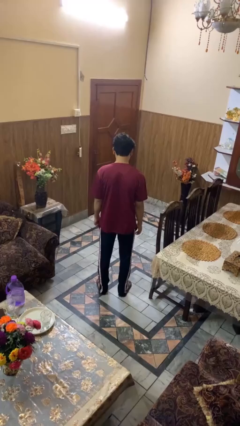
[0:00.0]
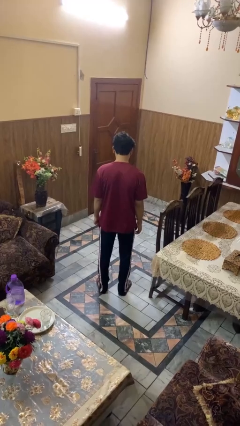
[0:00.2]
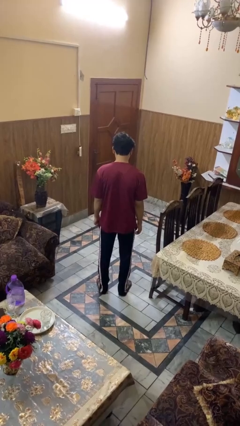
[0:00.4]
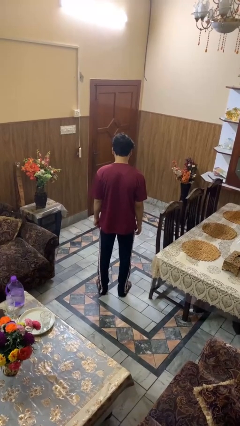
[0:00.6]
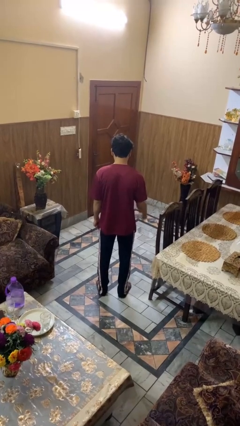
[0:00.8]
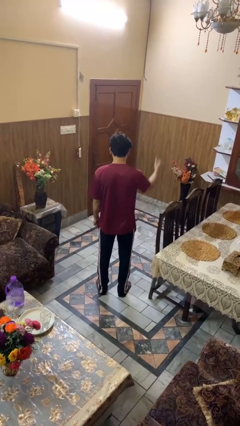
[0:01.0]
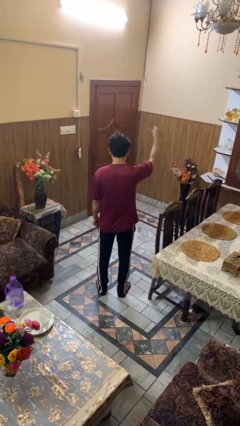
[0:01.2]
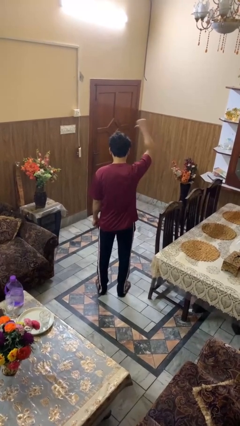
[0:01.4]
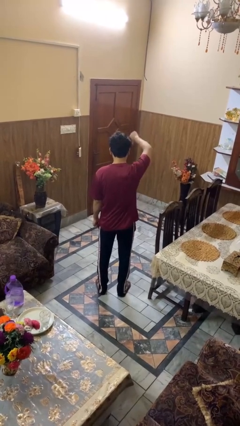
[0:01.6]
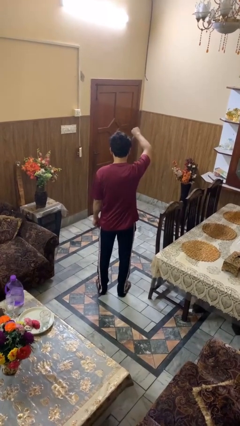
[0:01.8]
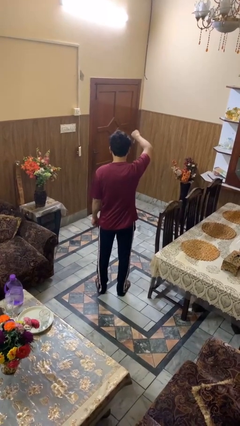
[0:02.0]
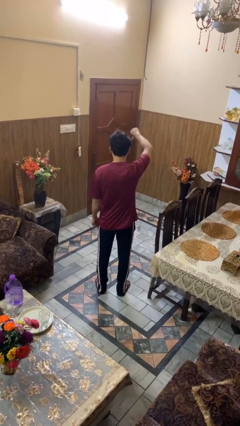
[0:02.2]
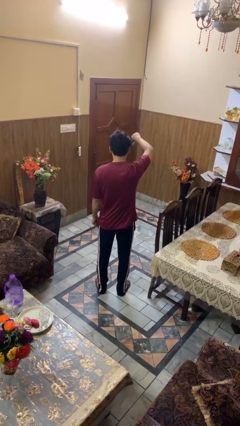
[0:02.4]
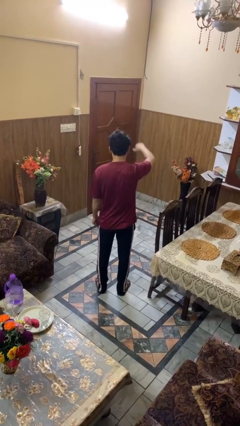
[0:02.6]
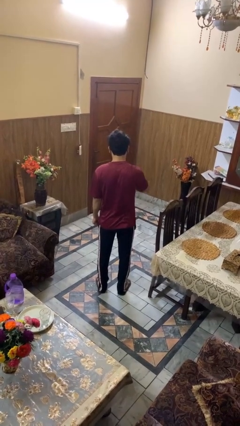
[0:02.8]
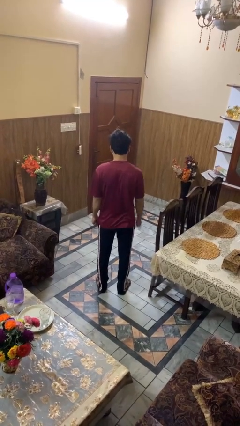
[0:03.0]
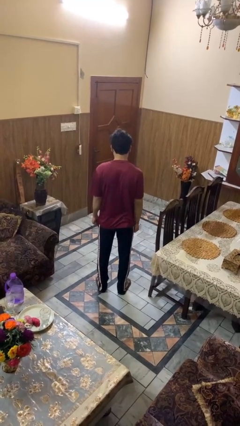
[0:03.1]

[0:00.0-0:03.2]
person gestures thumbs down

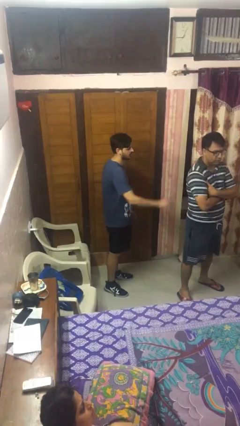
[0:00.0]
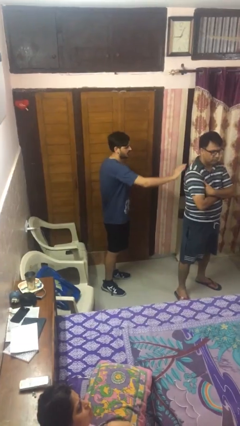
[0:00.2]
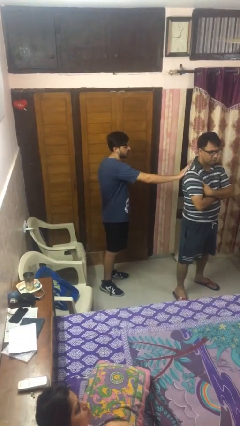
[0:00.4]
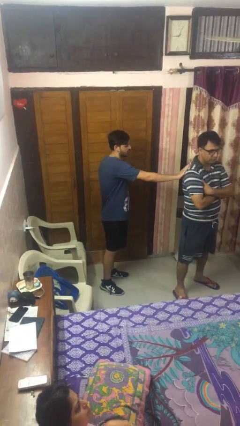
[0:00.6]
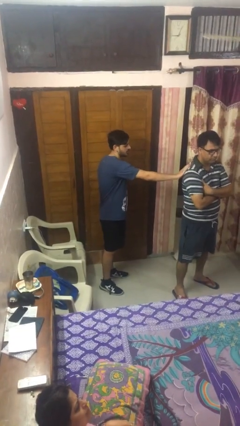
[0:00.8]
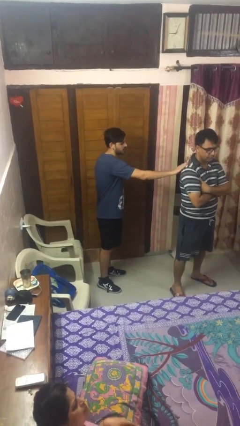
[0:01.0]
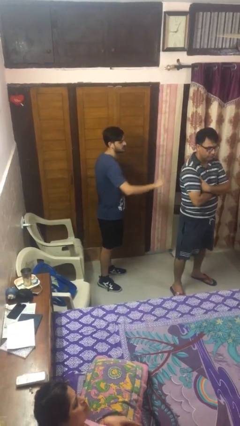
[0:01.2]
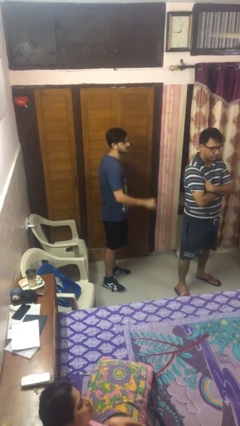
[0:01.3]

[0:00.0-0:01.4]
person touches back of person

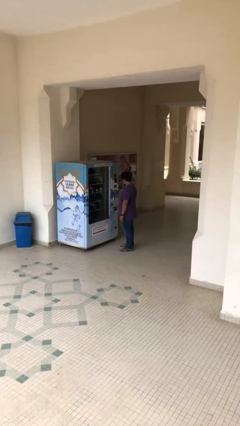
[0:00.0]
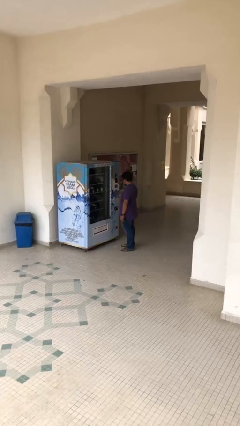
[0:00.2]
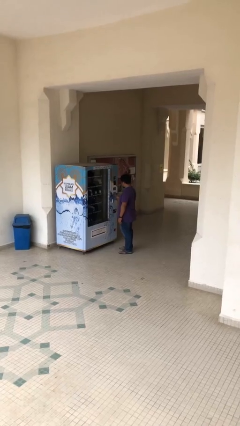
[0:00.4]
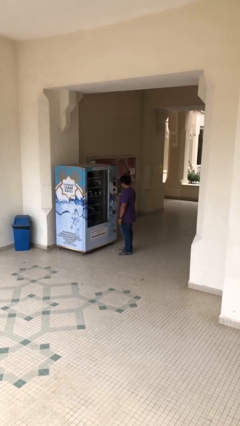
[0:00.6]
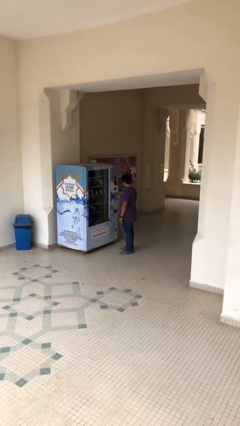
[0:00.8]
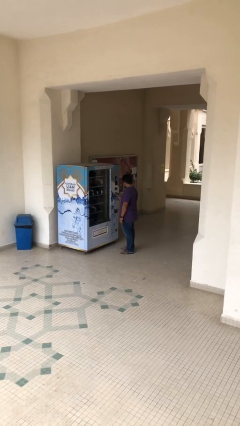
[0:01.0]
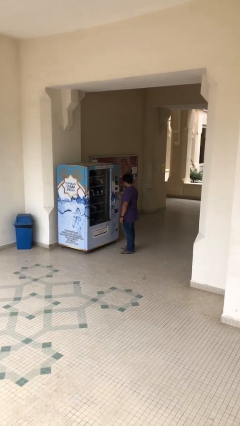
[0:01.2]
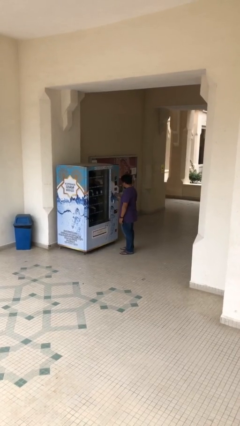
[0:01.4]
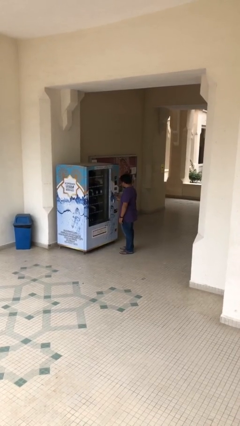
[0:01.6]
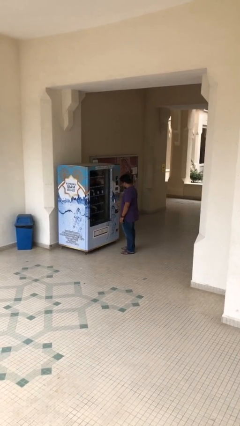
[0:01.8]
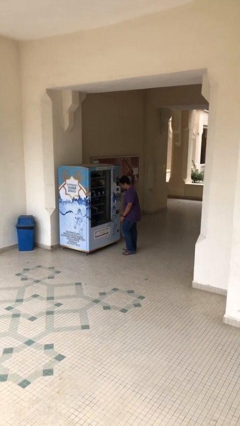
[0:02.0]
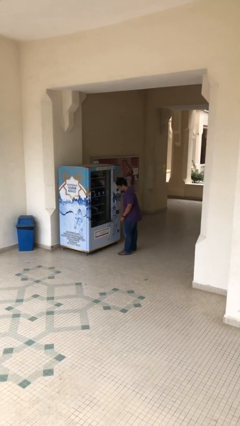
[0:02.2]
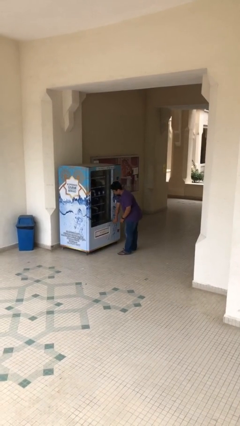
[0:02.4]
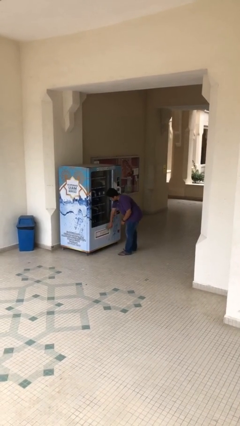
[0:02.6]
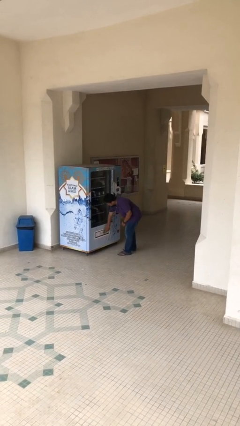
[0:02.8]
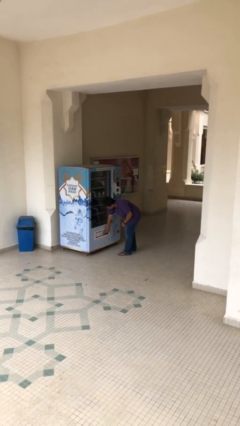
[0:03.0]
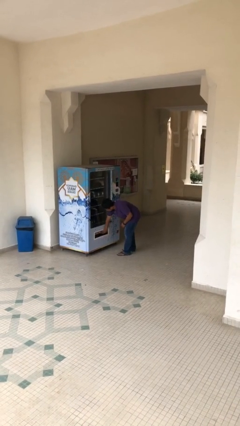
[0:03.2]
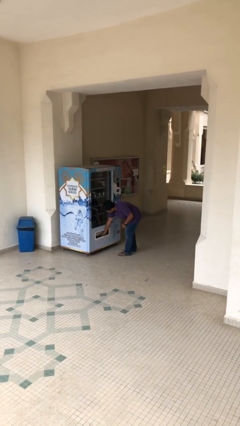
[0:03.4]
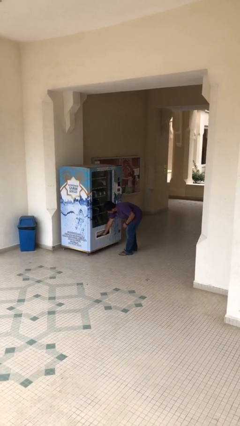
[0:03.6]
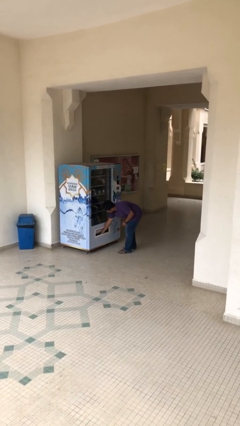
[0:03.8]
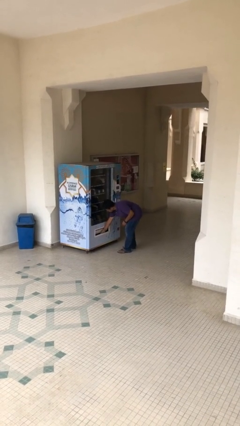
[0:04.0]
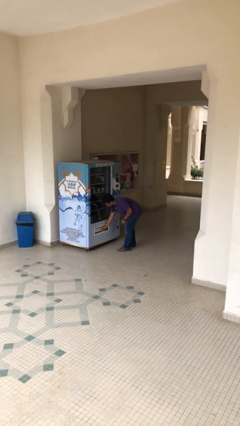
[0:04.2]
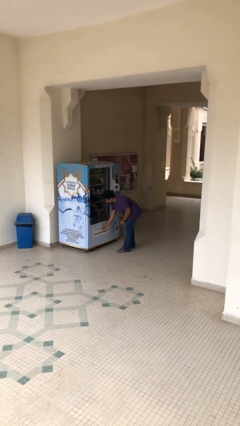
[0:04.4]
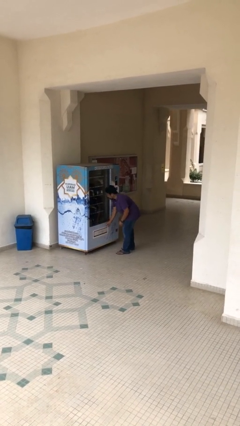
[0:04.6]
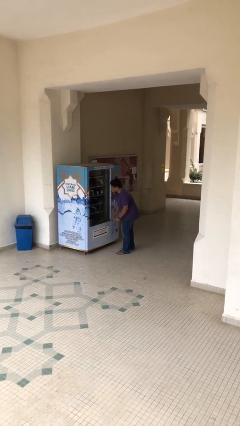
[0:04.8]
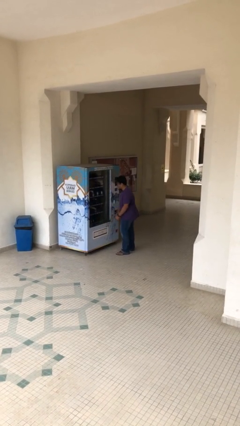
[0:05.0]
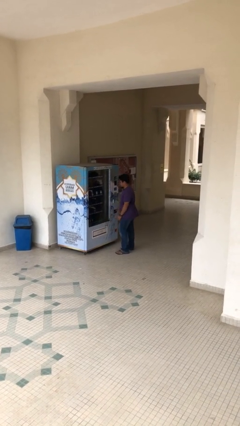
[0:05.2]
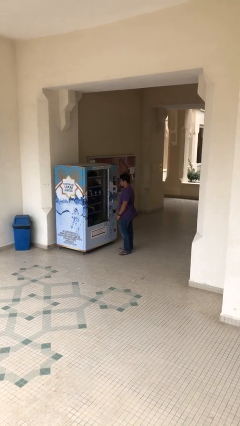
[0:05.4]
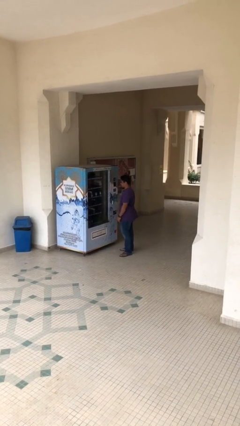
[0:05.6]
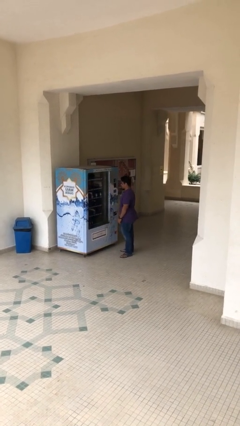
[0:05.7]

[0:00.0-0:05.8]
person purchases from machine

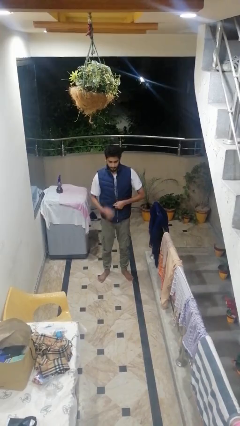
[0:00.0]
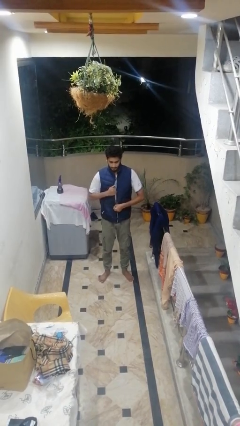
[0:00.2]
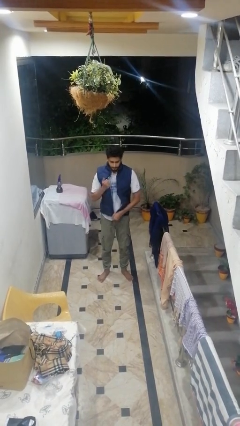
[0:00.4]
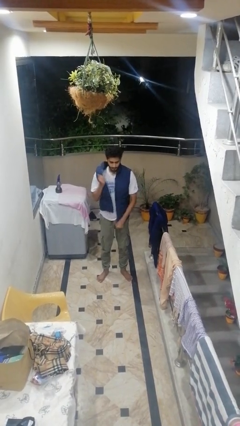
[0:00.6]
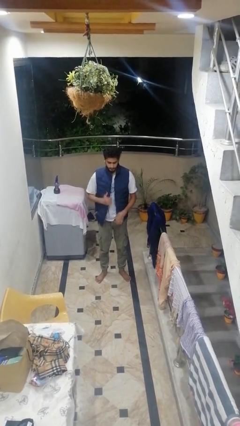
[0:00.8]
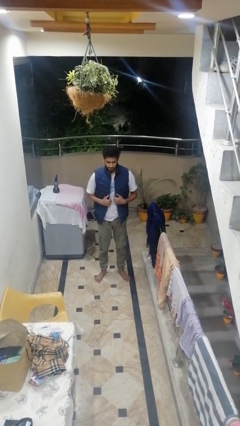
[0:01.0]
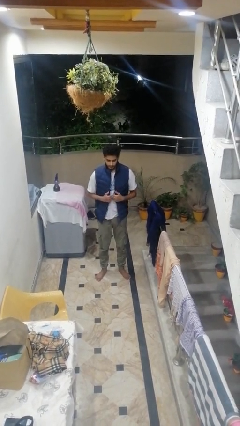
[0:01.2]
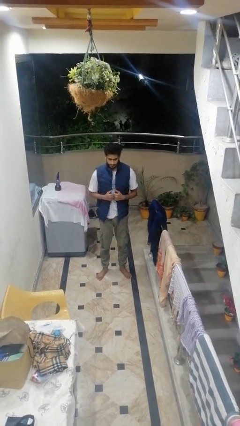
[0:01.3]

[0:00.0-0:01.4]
person unzips jacket

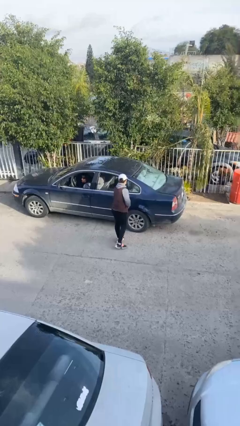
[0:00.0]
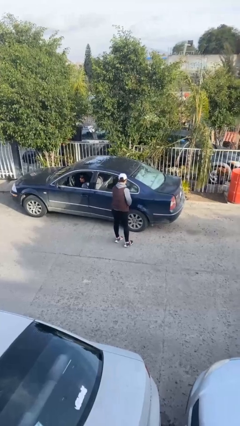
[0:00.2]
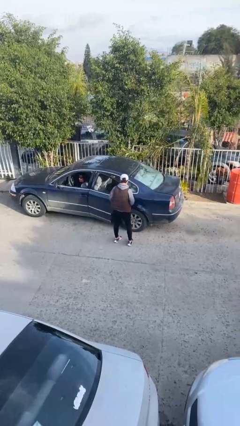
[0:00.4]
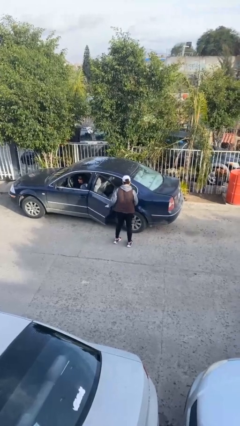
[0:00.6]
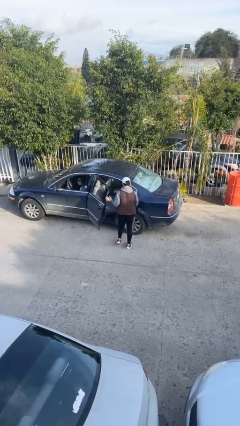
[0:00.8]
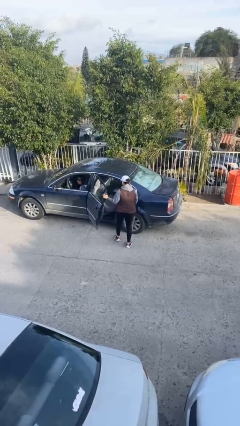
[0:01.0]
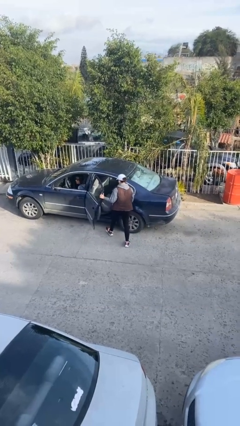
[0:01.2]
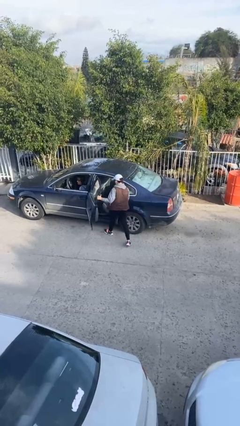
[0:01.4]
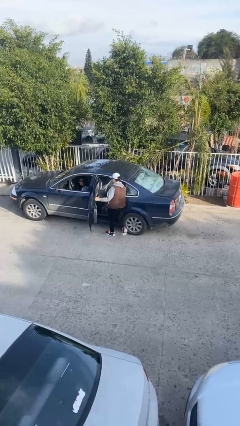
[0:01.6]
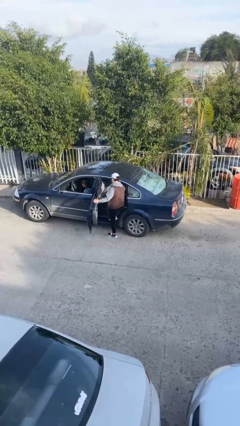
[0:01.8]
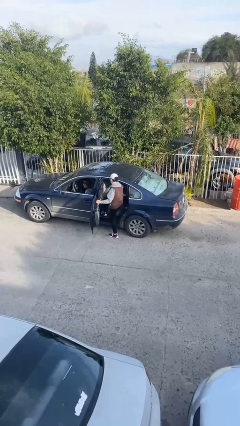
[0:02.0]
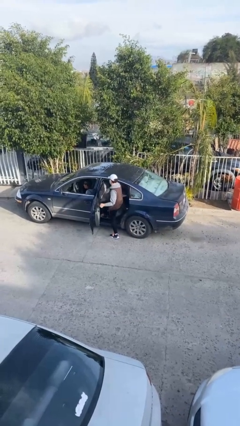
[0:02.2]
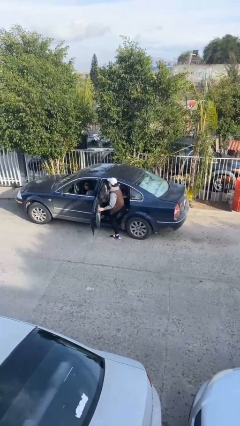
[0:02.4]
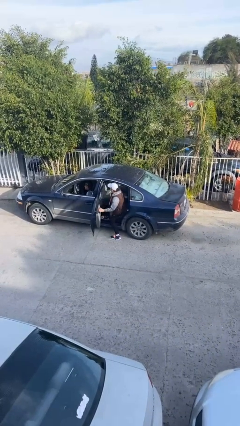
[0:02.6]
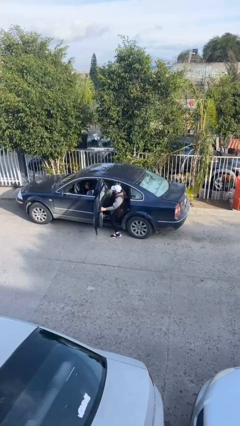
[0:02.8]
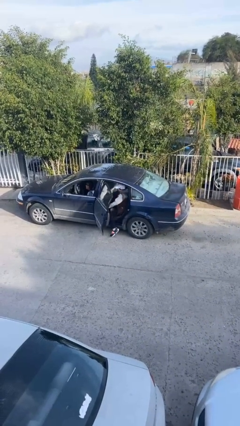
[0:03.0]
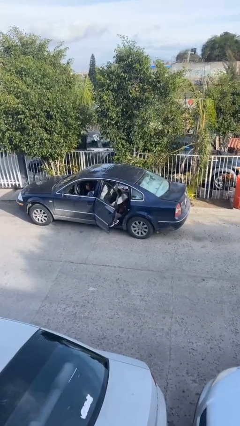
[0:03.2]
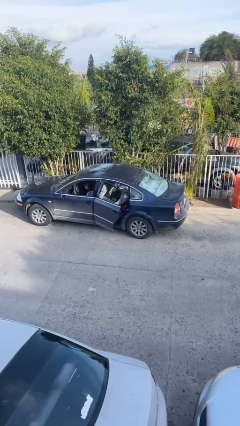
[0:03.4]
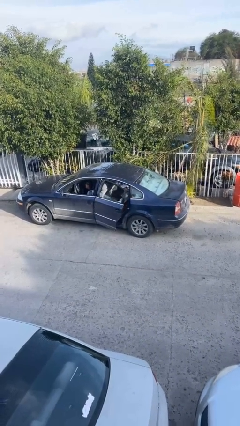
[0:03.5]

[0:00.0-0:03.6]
car picks up person

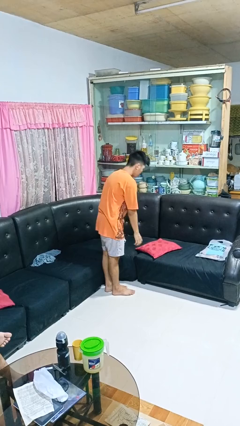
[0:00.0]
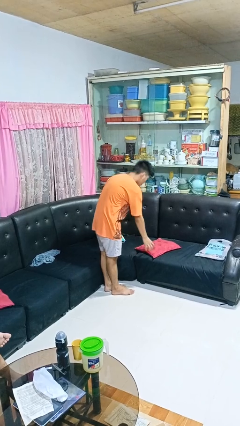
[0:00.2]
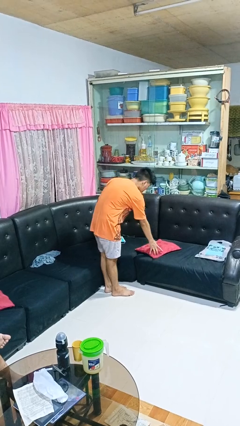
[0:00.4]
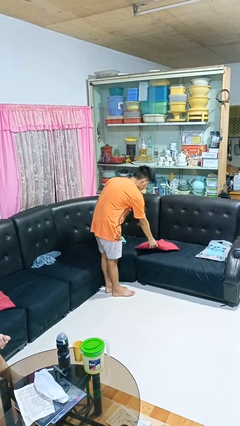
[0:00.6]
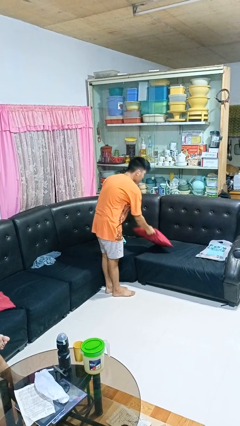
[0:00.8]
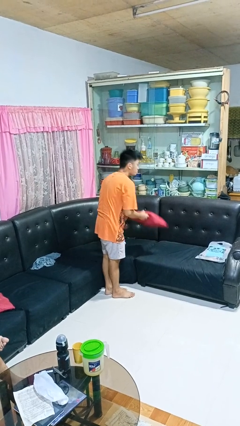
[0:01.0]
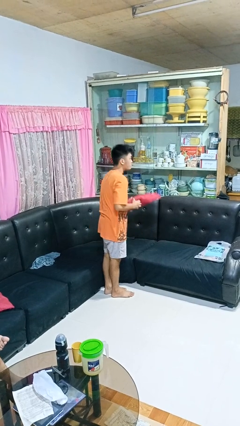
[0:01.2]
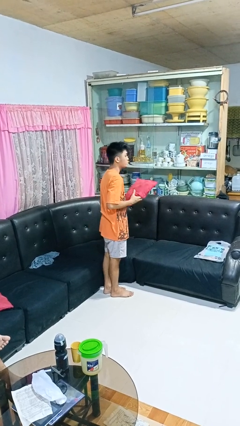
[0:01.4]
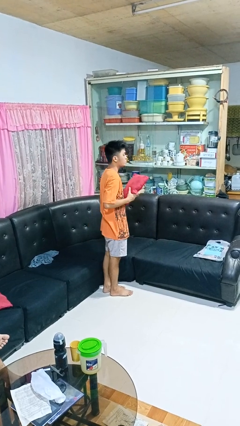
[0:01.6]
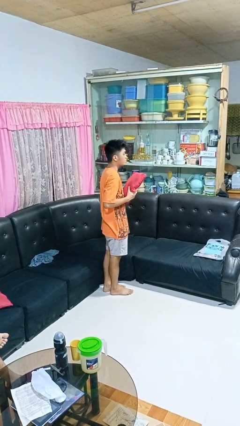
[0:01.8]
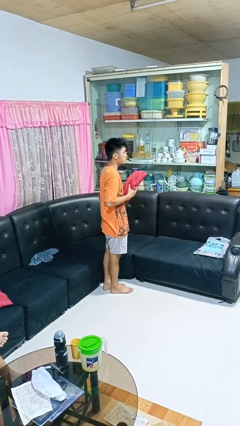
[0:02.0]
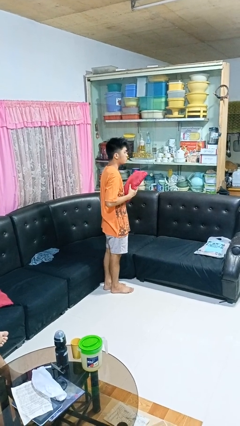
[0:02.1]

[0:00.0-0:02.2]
person picks up object from couch
